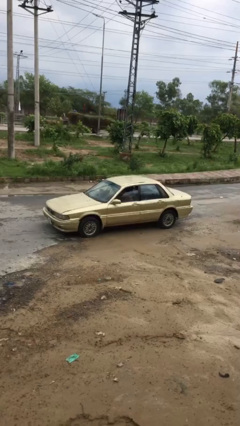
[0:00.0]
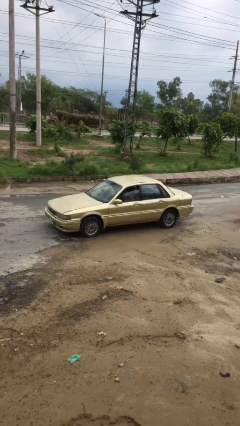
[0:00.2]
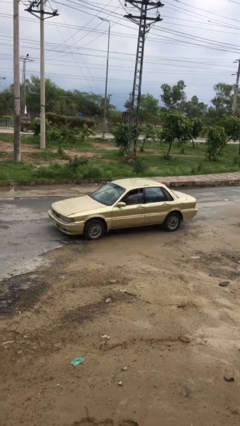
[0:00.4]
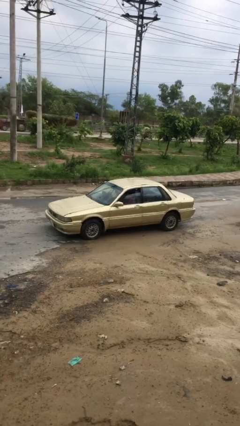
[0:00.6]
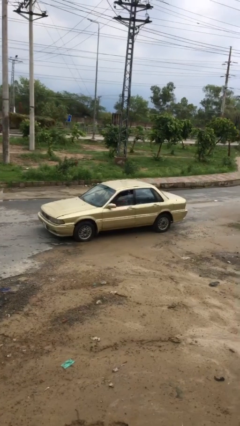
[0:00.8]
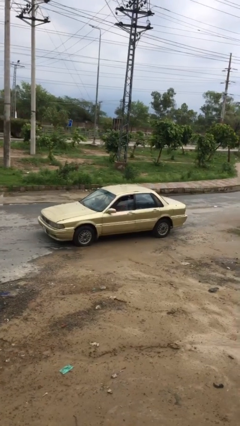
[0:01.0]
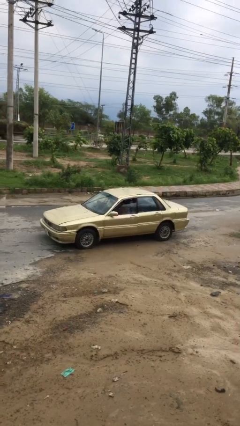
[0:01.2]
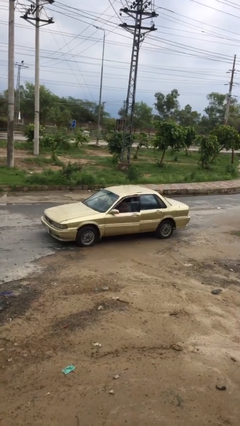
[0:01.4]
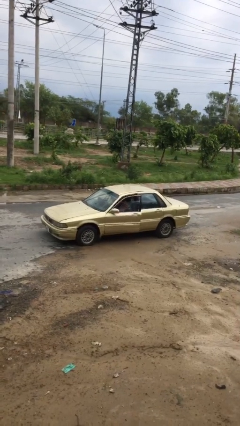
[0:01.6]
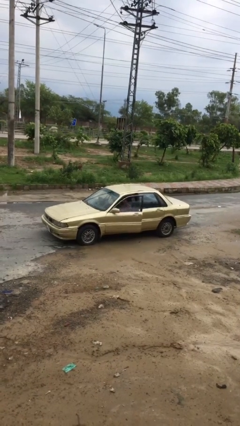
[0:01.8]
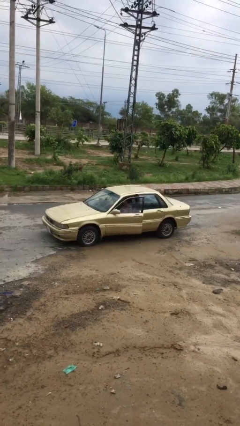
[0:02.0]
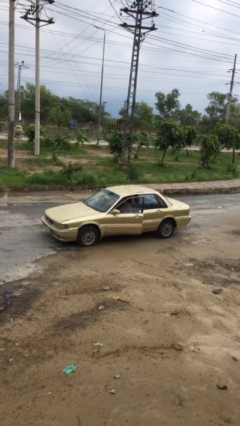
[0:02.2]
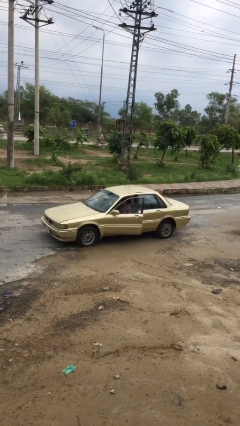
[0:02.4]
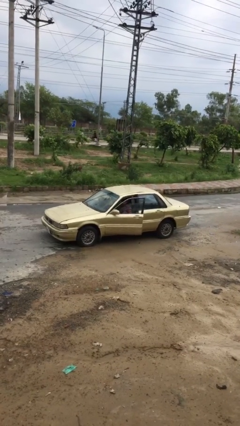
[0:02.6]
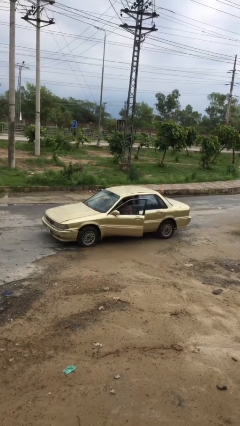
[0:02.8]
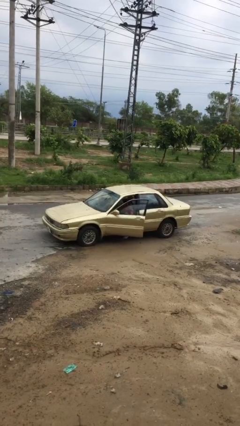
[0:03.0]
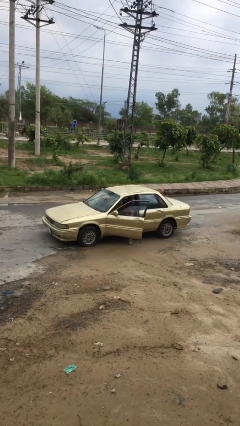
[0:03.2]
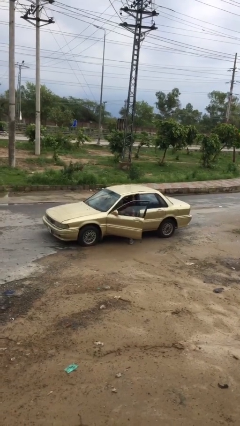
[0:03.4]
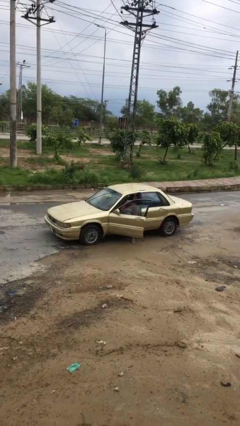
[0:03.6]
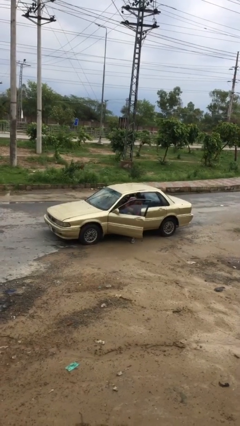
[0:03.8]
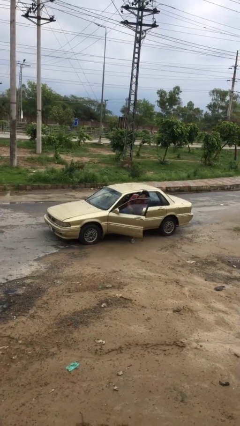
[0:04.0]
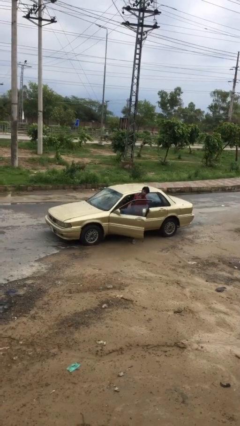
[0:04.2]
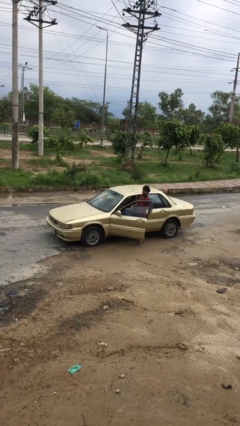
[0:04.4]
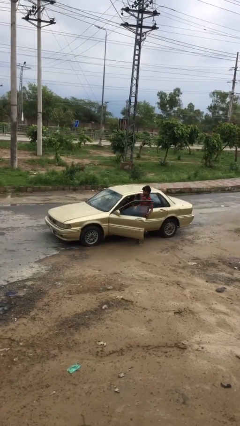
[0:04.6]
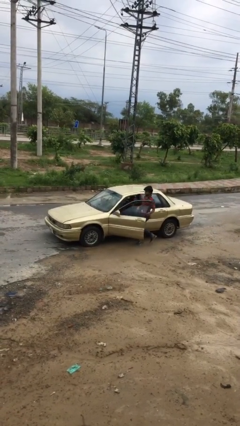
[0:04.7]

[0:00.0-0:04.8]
car drops off person

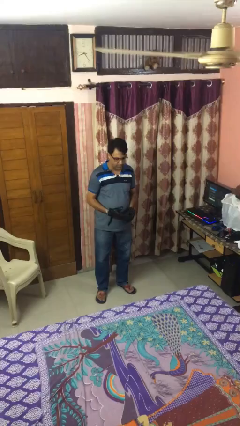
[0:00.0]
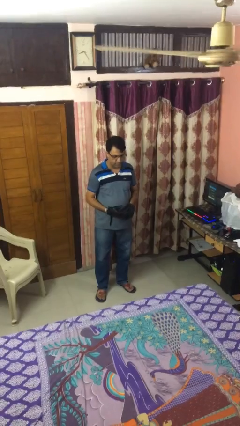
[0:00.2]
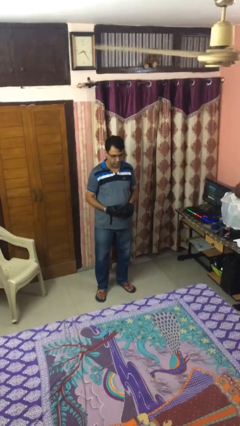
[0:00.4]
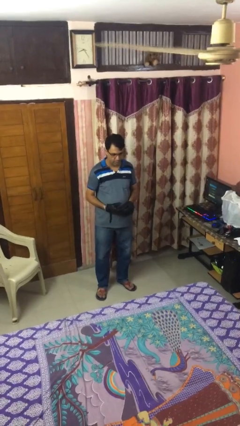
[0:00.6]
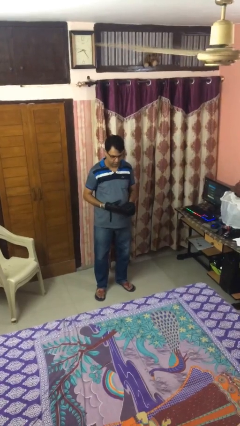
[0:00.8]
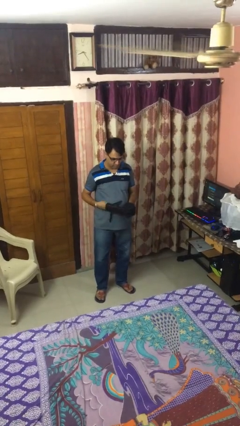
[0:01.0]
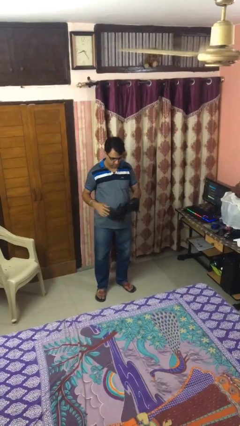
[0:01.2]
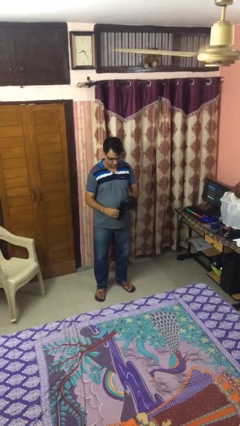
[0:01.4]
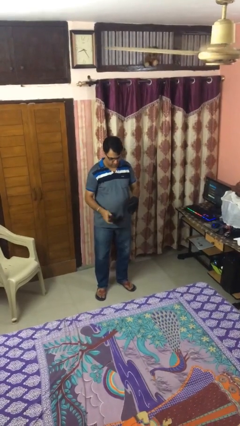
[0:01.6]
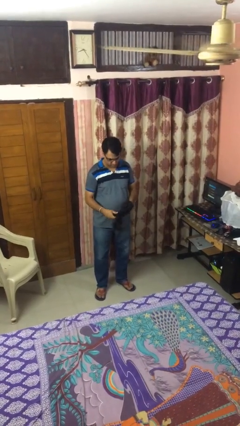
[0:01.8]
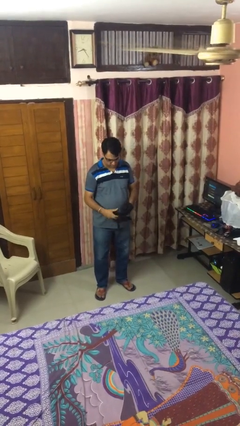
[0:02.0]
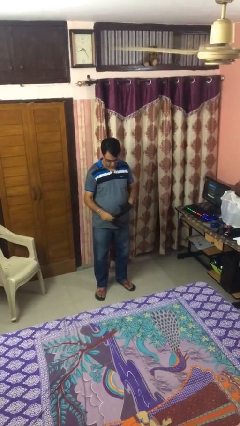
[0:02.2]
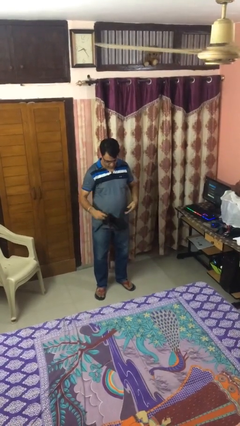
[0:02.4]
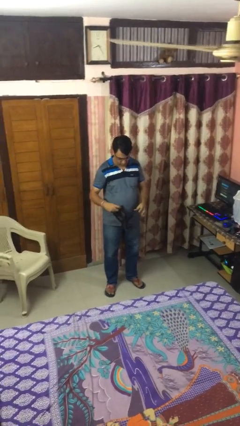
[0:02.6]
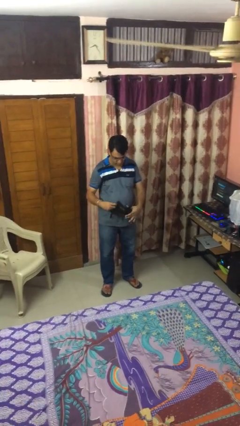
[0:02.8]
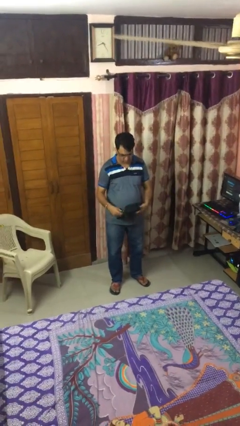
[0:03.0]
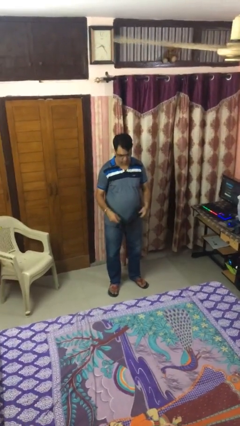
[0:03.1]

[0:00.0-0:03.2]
person takes off gloves

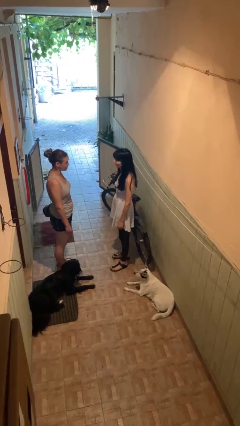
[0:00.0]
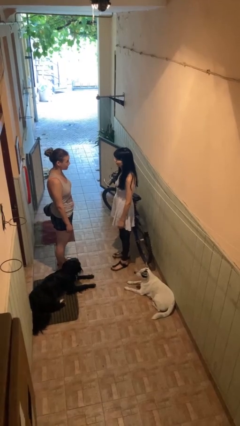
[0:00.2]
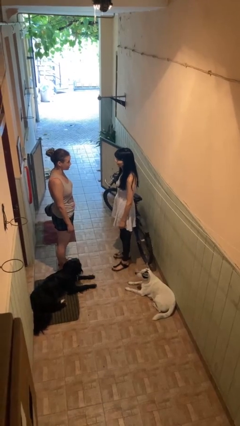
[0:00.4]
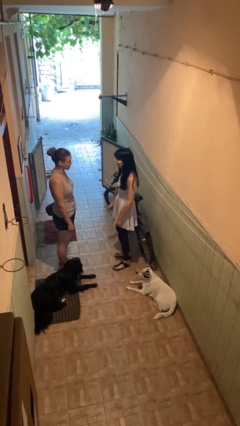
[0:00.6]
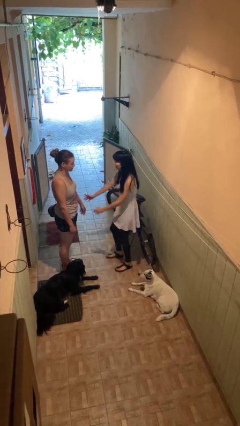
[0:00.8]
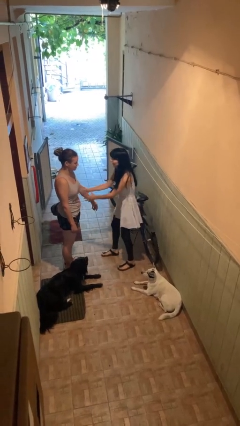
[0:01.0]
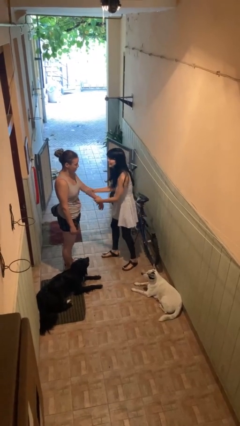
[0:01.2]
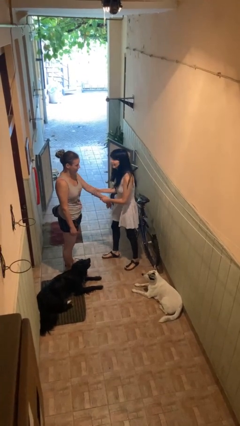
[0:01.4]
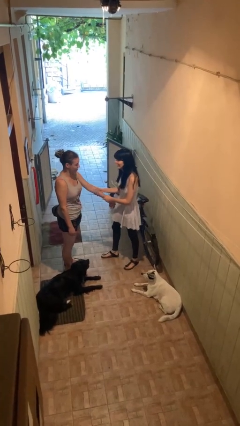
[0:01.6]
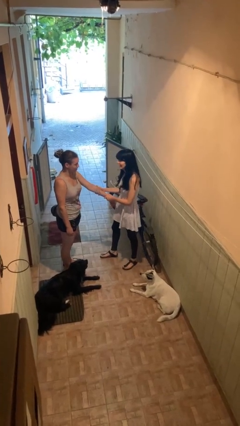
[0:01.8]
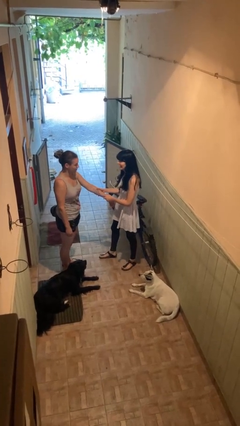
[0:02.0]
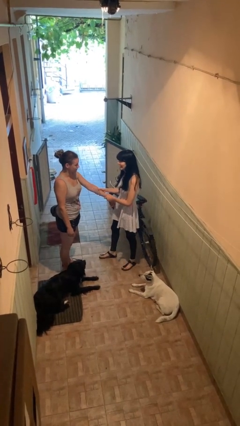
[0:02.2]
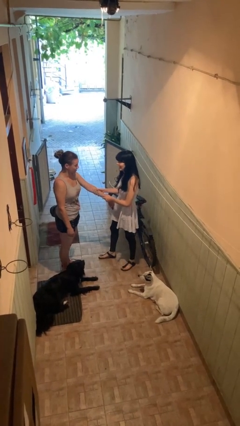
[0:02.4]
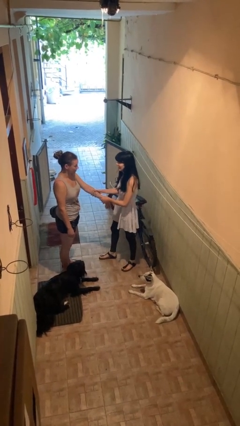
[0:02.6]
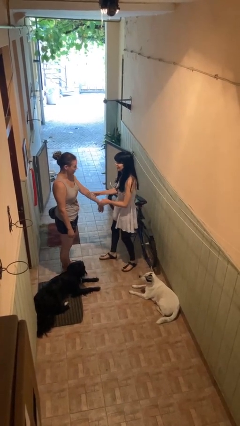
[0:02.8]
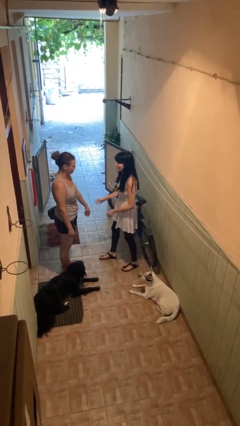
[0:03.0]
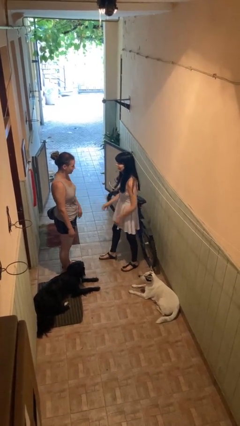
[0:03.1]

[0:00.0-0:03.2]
person grabs person by forearm

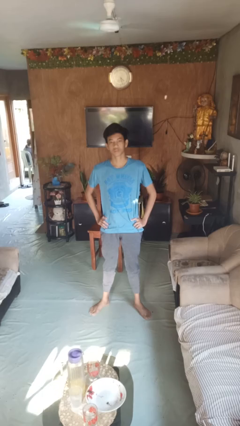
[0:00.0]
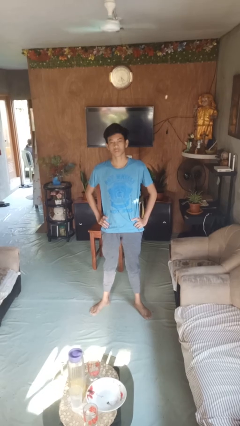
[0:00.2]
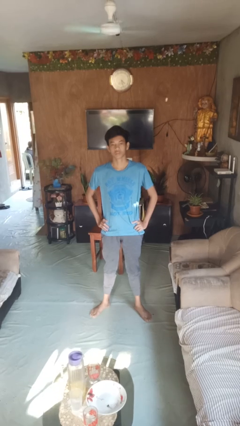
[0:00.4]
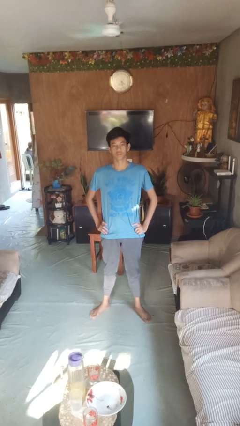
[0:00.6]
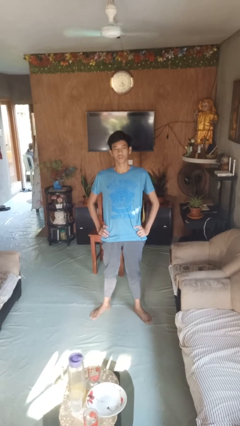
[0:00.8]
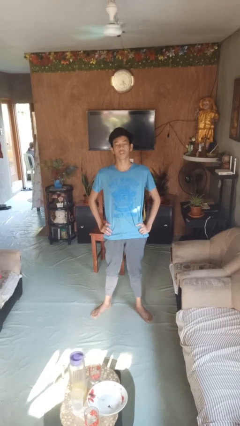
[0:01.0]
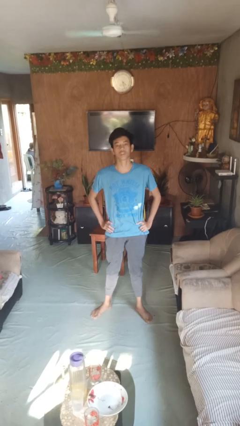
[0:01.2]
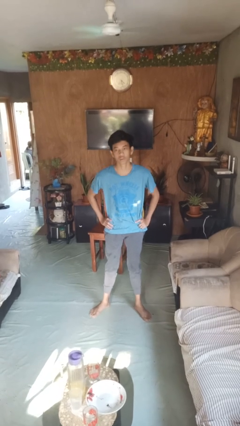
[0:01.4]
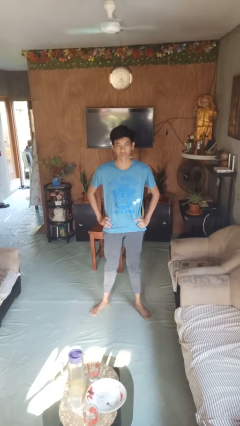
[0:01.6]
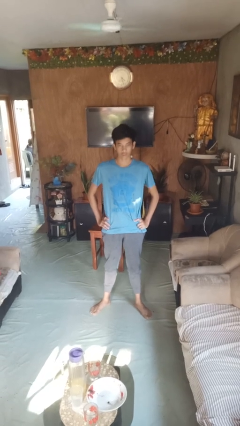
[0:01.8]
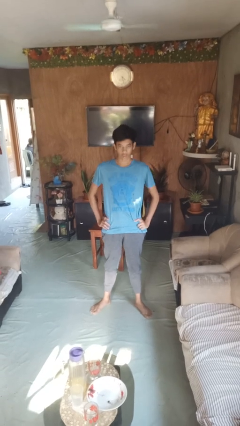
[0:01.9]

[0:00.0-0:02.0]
person wiggles hips

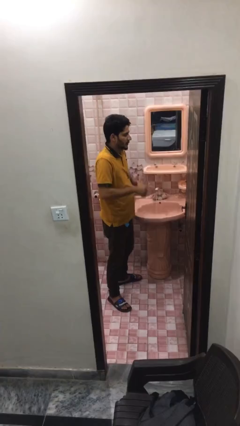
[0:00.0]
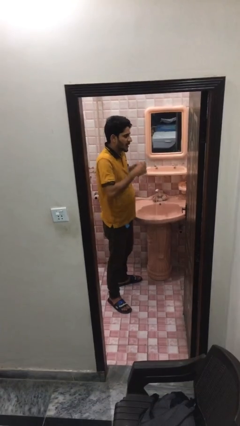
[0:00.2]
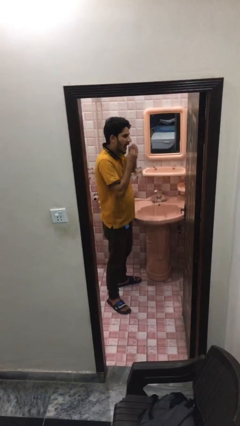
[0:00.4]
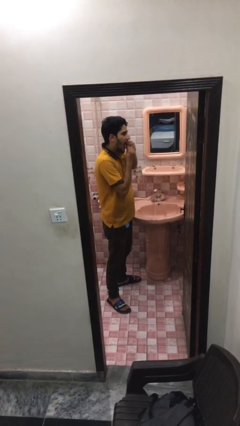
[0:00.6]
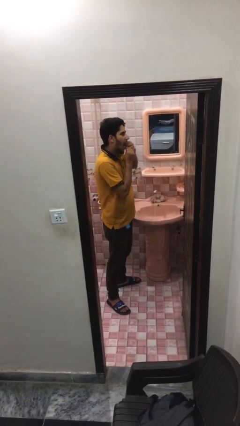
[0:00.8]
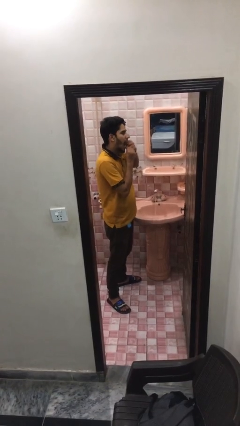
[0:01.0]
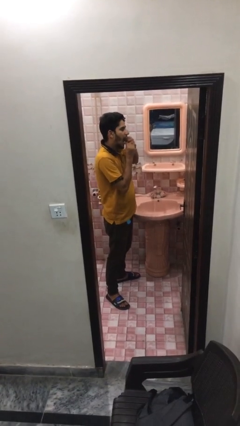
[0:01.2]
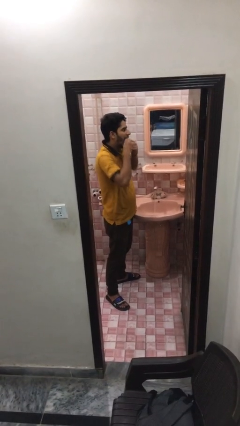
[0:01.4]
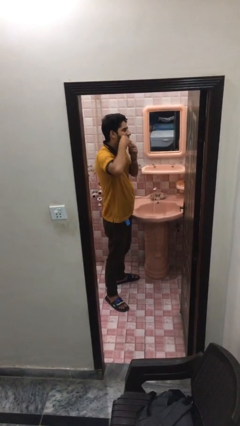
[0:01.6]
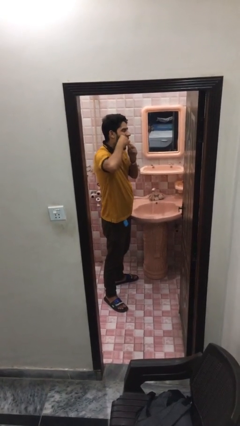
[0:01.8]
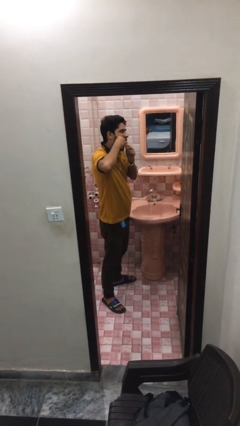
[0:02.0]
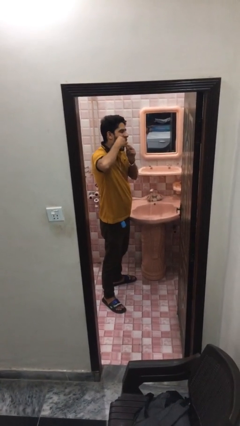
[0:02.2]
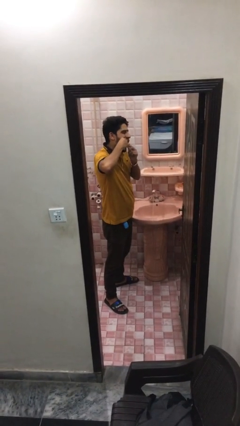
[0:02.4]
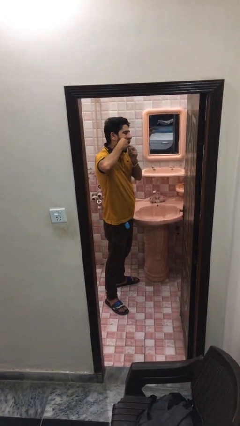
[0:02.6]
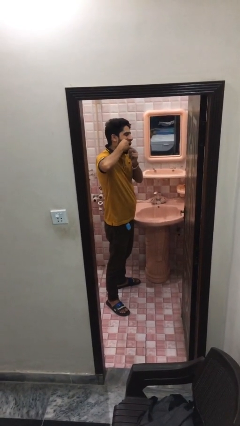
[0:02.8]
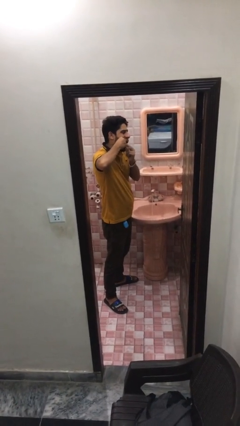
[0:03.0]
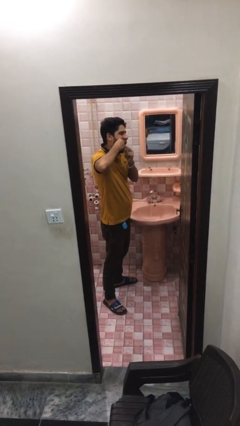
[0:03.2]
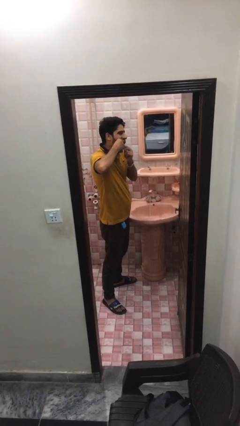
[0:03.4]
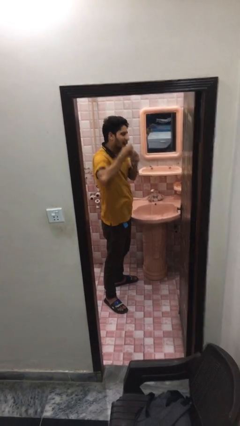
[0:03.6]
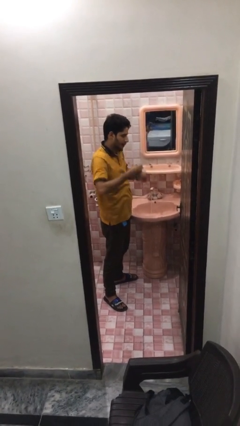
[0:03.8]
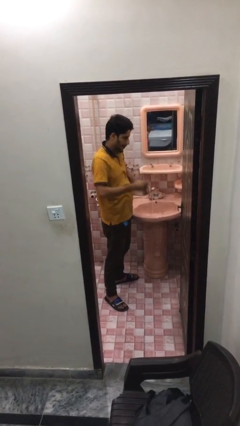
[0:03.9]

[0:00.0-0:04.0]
person flosses

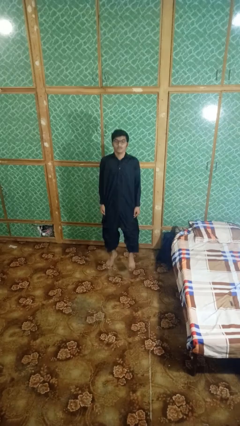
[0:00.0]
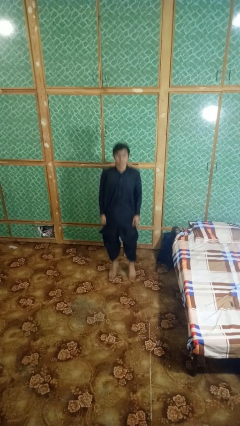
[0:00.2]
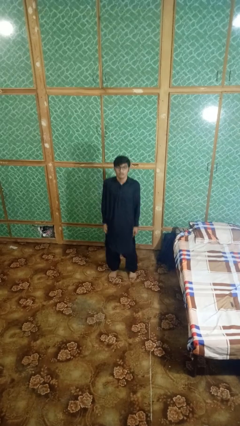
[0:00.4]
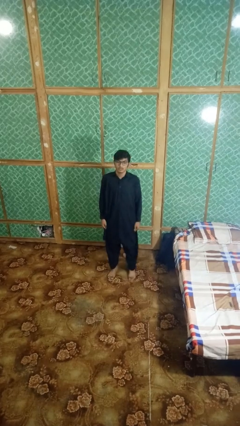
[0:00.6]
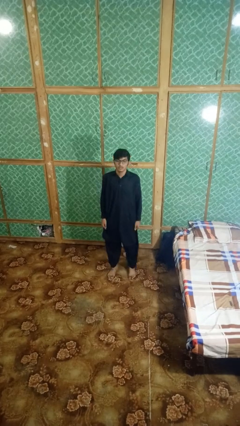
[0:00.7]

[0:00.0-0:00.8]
person jumps
